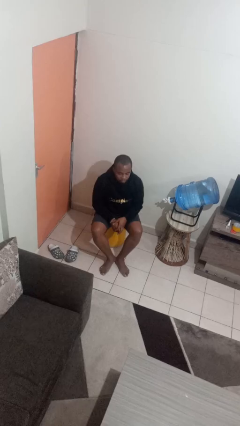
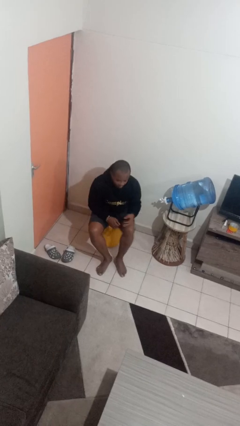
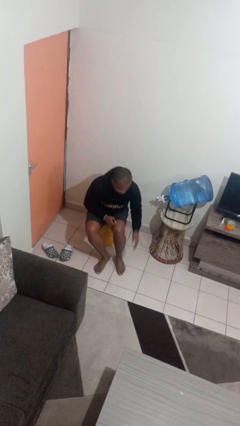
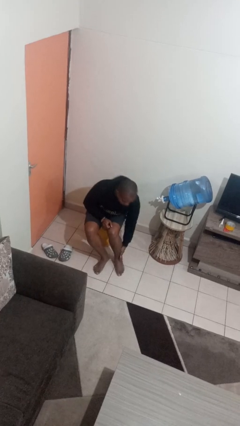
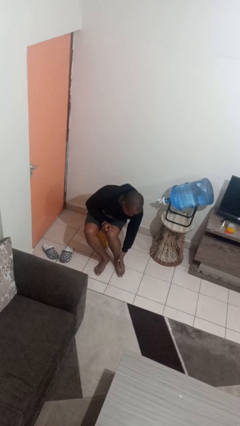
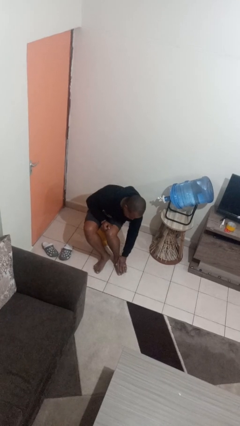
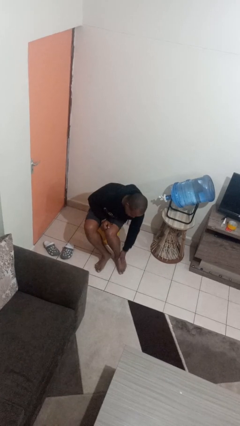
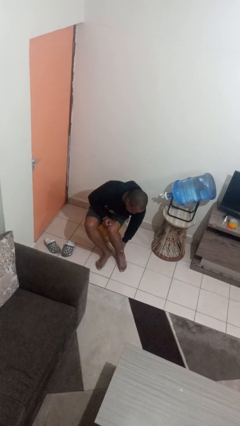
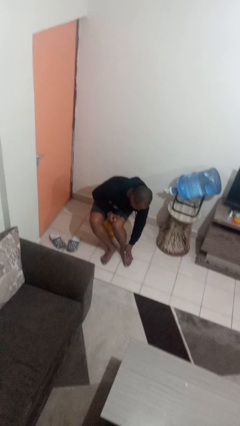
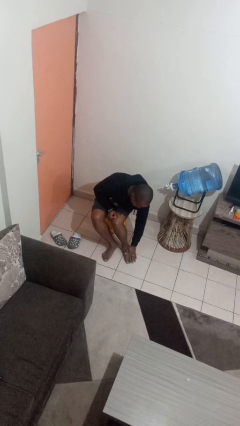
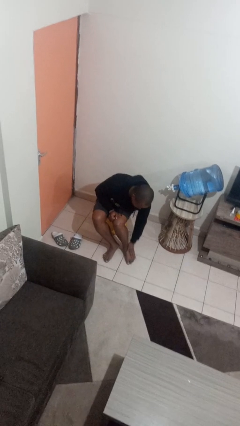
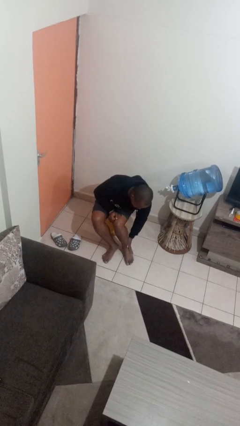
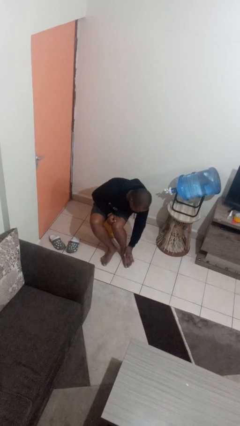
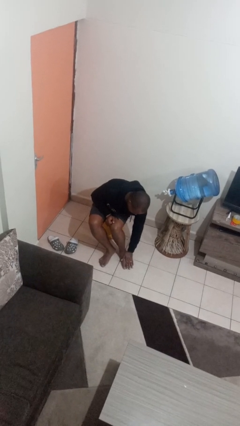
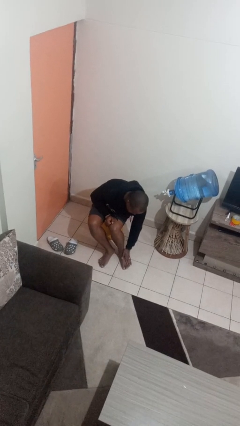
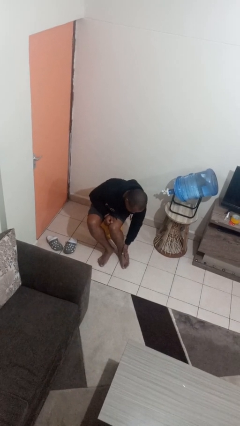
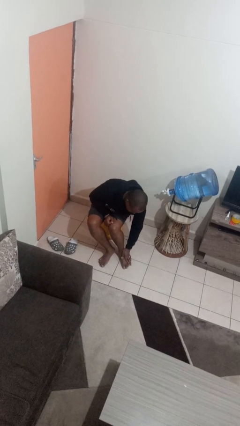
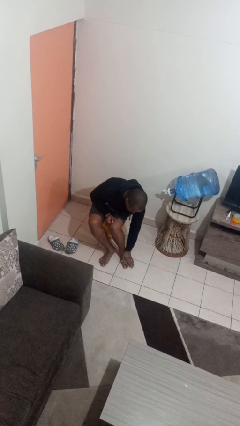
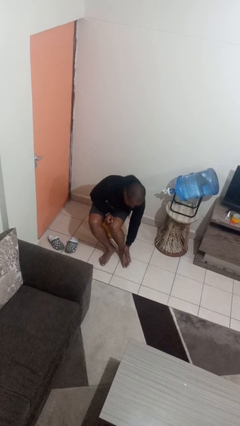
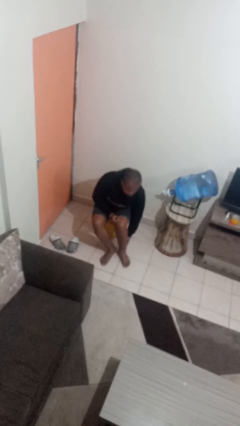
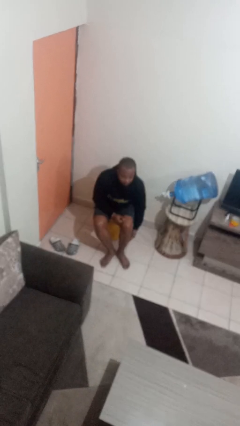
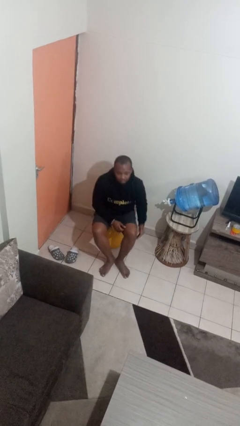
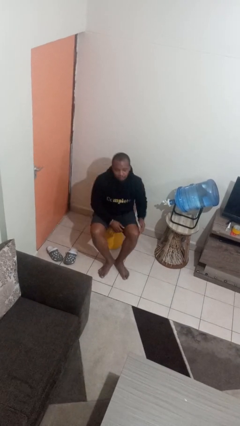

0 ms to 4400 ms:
person rubs foot

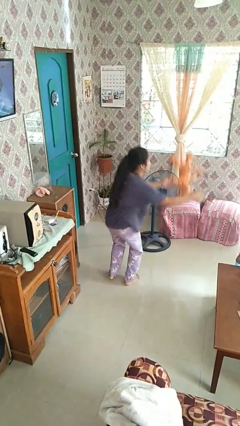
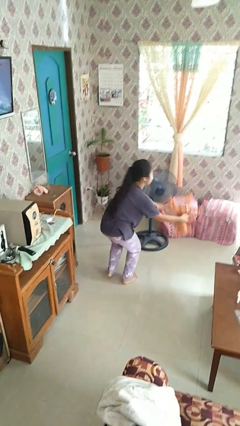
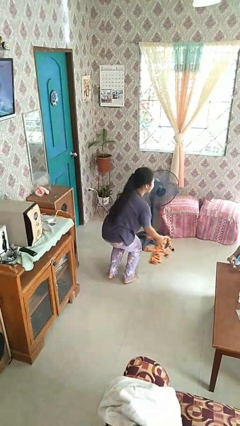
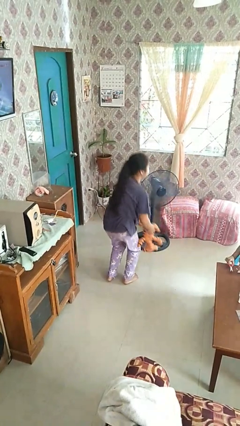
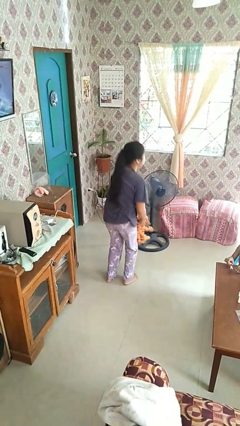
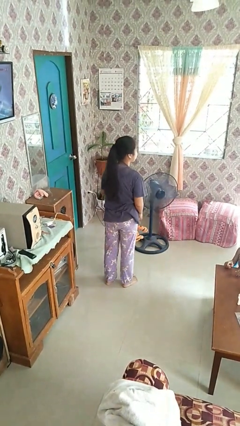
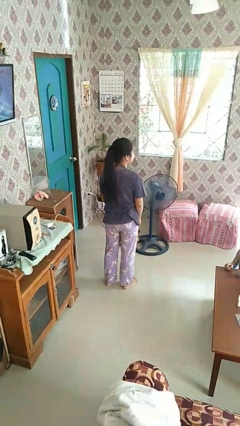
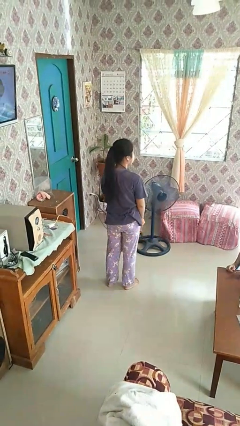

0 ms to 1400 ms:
person catches dropped object

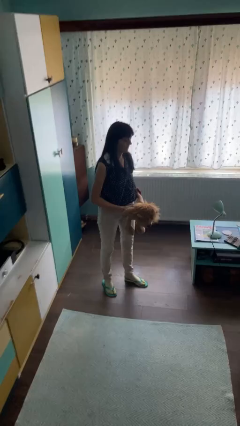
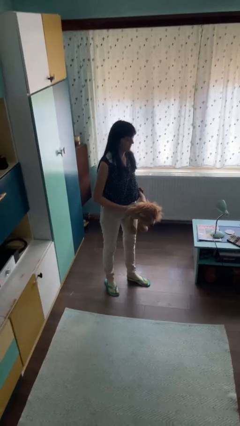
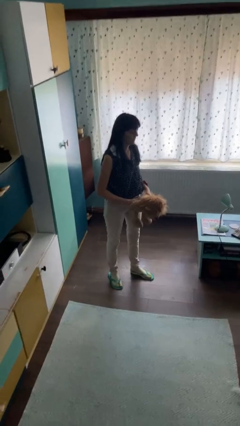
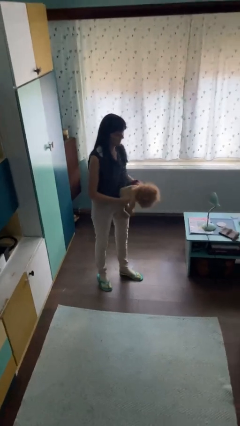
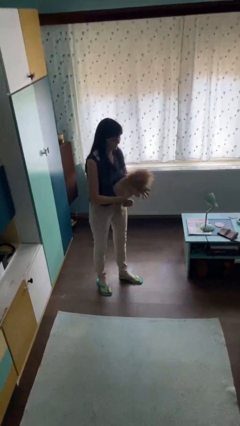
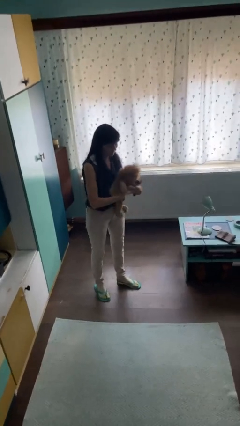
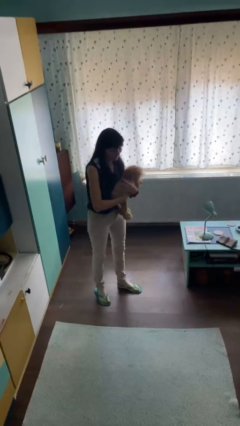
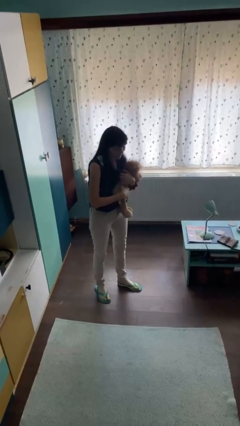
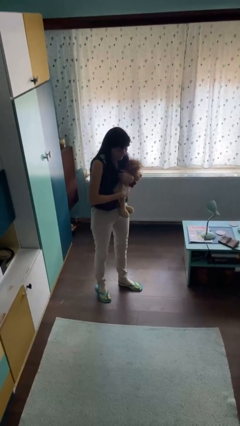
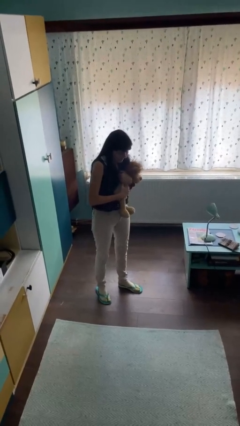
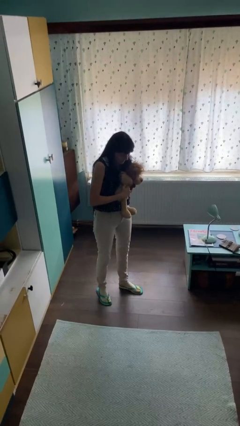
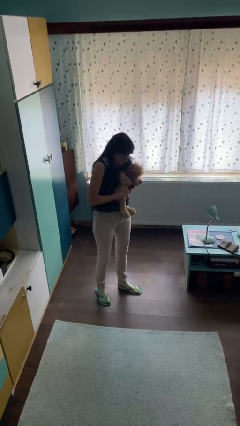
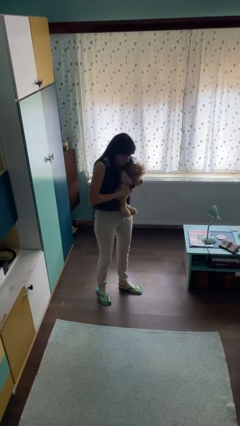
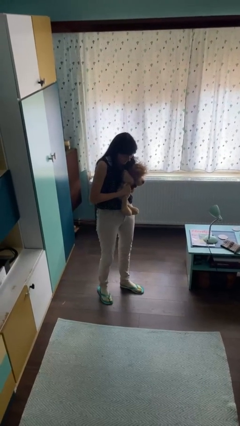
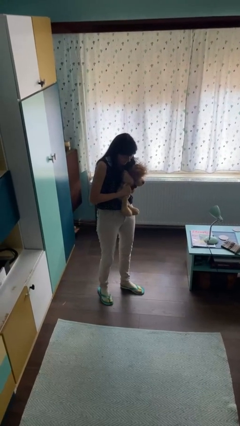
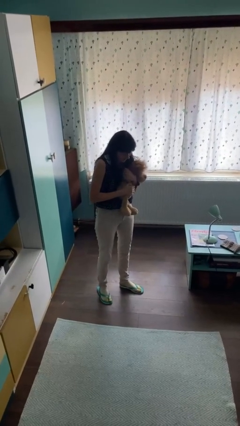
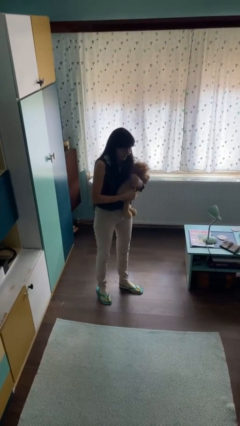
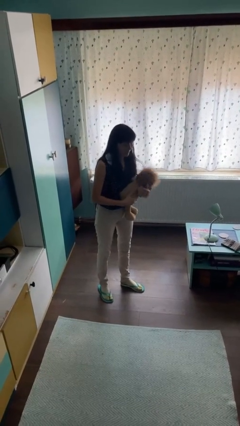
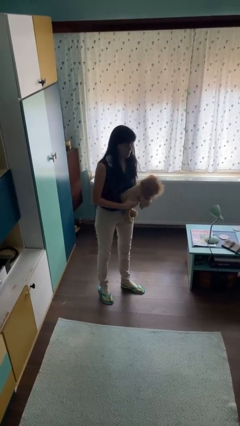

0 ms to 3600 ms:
person squeezes object

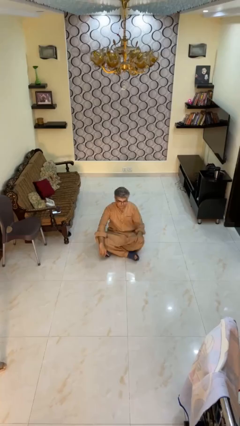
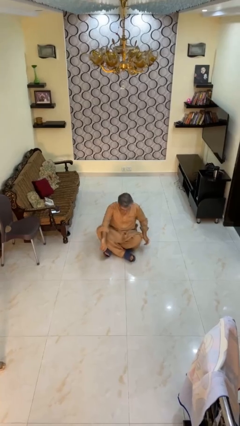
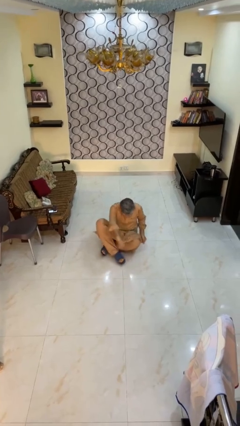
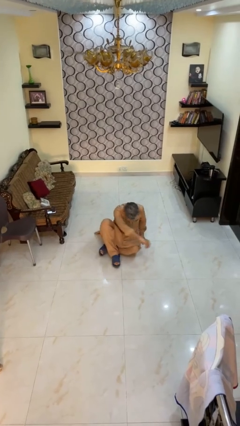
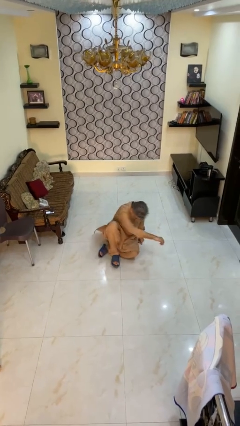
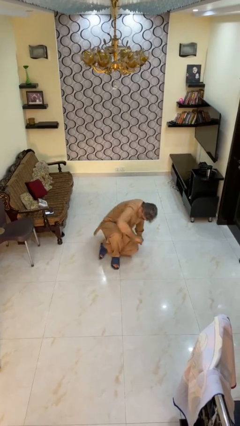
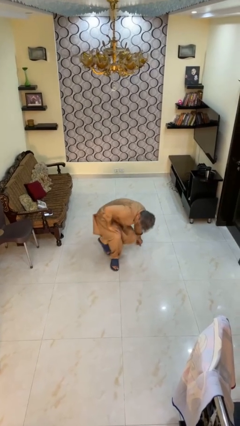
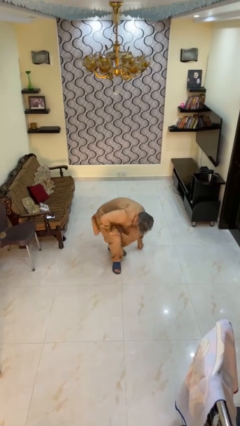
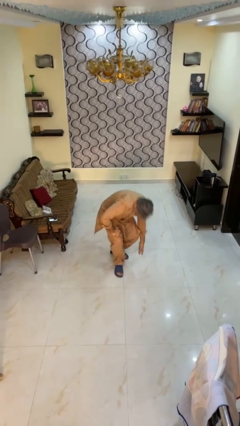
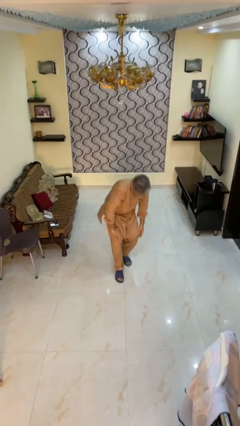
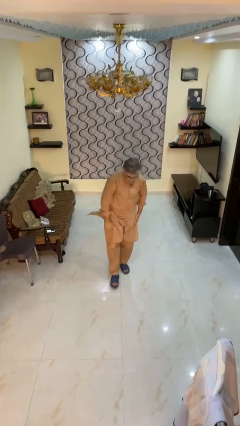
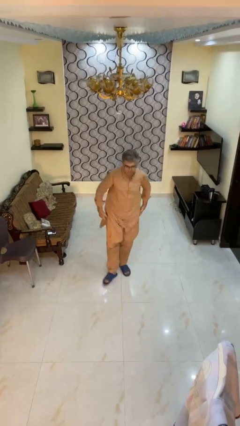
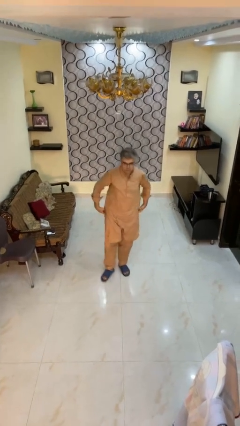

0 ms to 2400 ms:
person stands up from floor

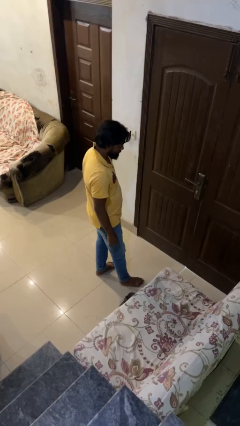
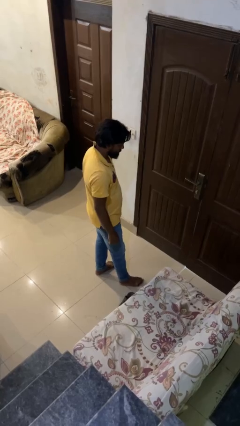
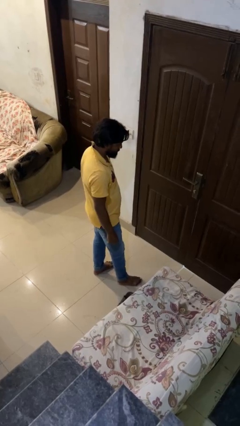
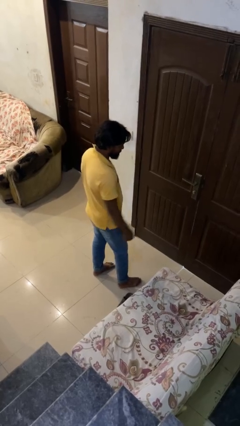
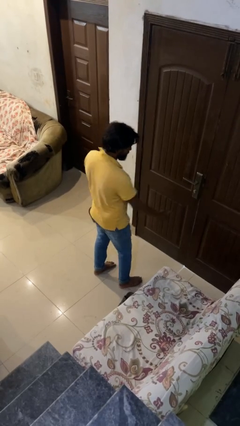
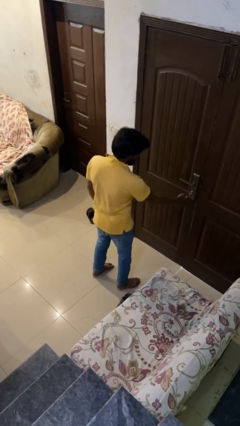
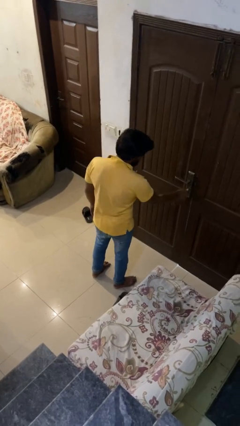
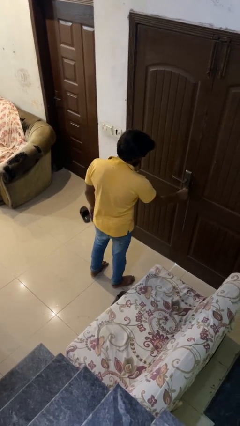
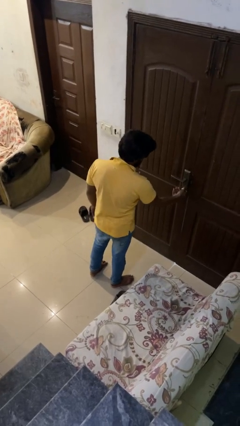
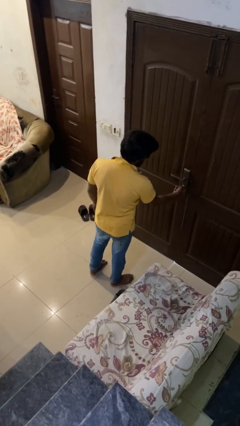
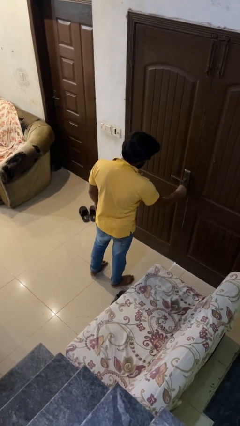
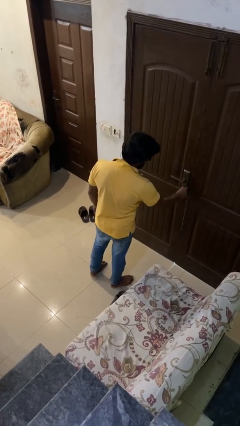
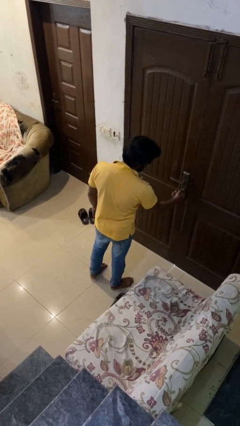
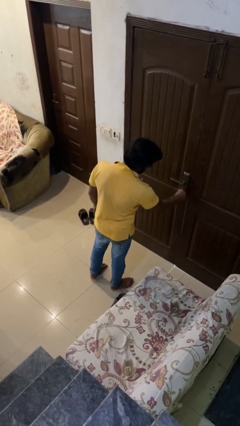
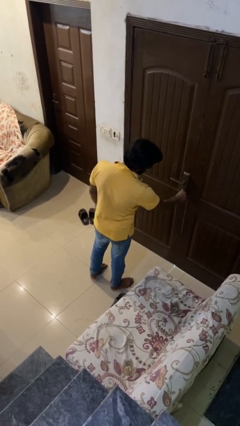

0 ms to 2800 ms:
person unlocks door with keys

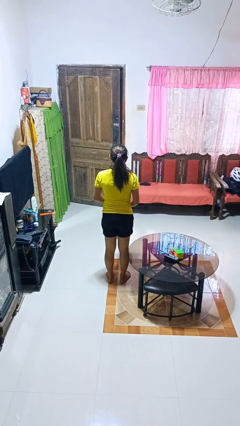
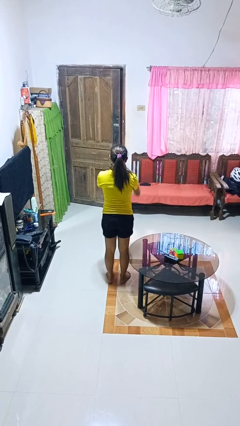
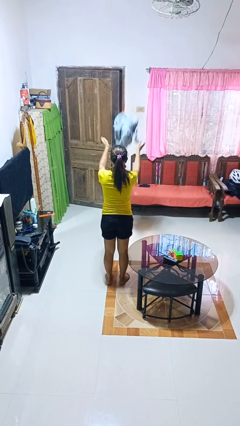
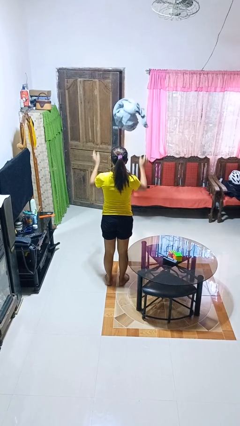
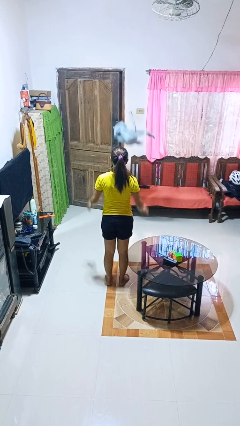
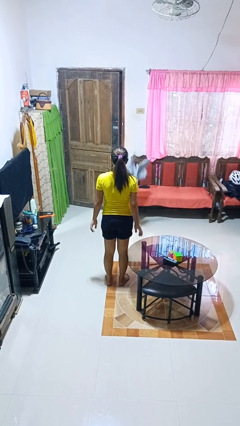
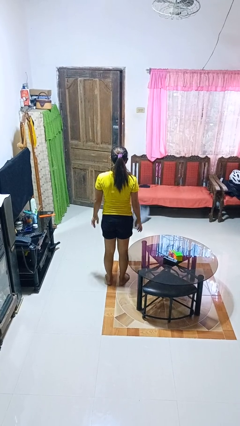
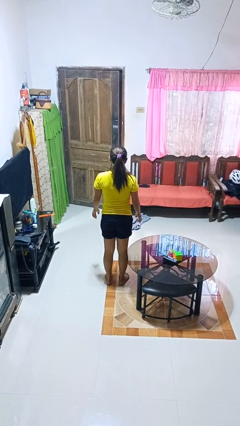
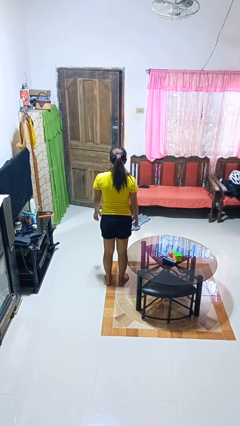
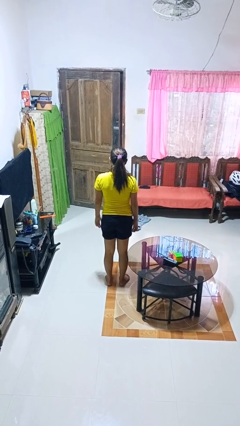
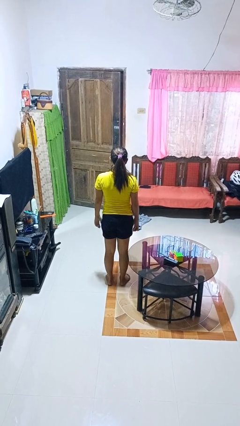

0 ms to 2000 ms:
person throws object into air

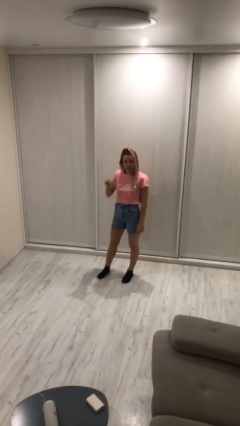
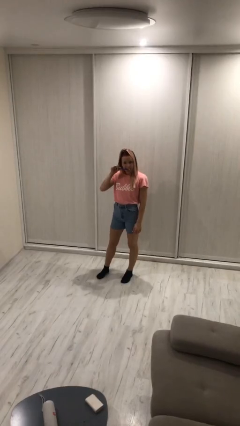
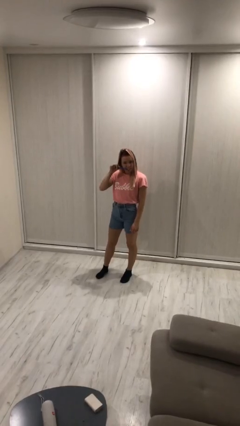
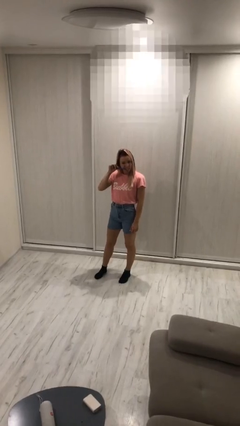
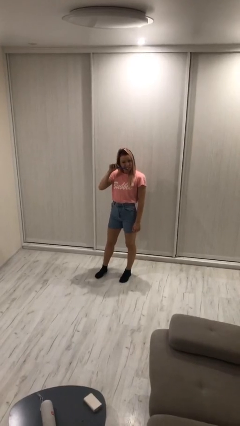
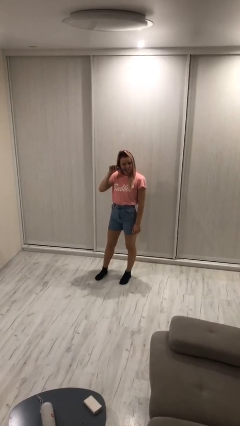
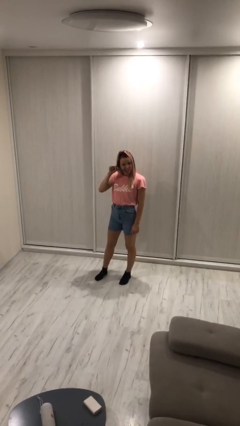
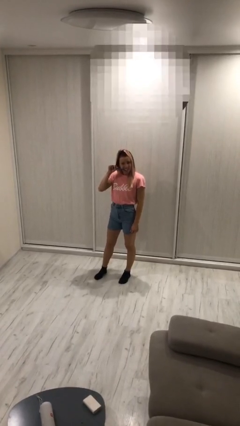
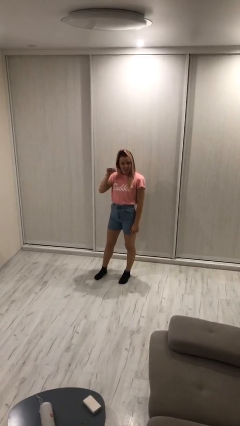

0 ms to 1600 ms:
person brushes teeth
